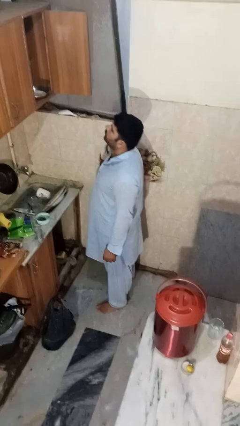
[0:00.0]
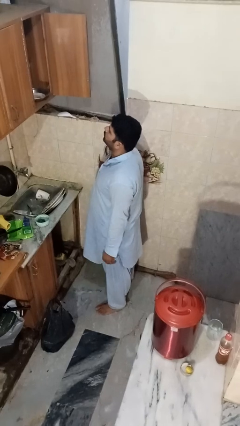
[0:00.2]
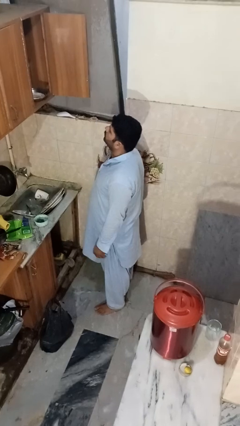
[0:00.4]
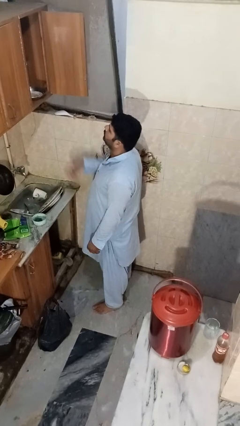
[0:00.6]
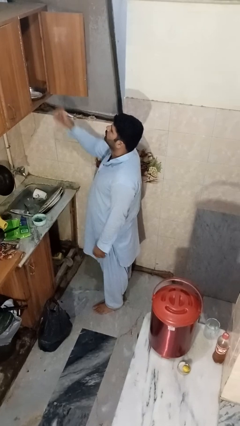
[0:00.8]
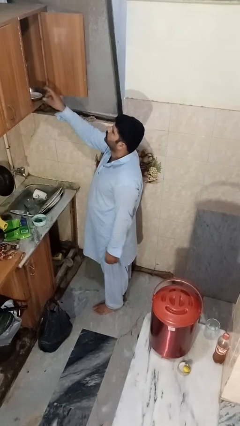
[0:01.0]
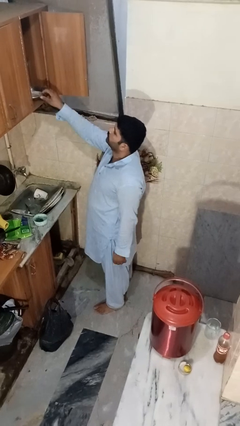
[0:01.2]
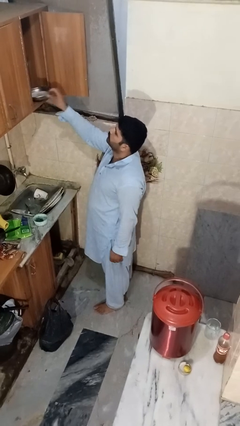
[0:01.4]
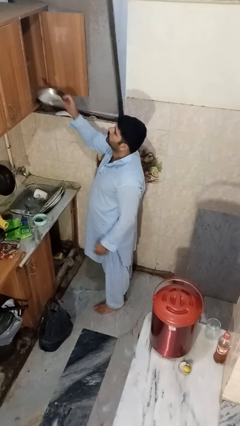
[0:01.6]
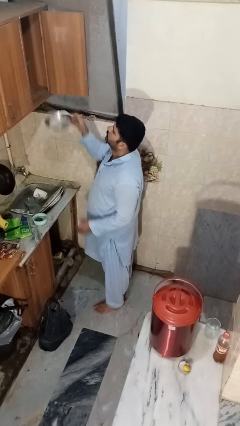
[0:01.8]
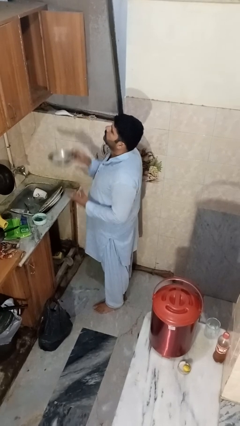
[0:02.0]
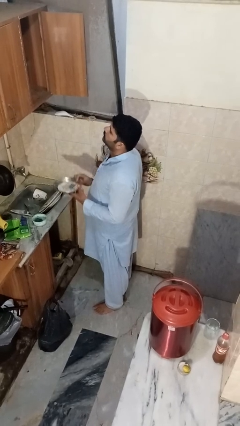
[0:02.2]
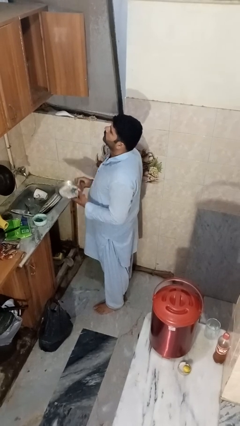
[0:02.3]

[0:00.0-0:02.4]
person takes object from cabinet

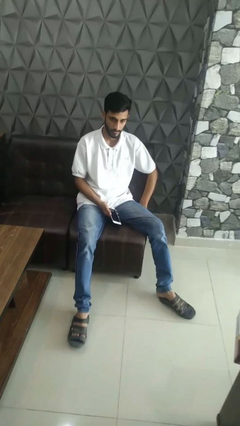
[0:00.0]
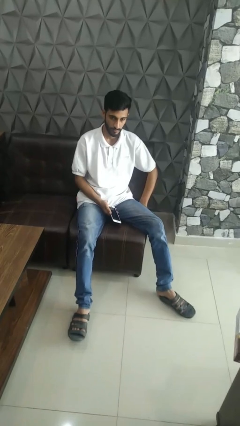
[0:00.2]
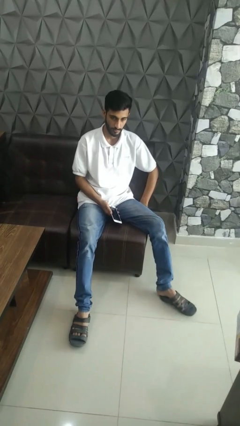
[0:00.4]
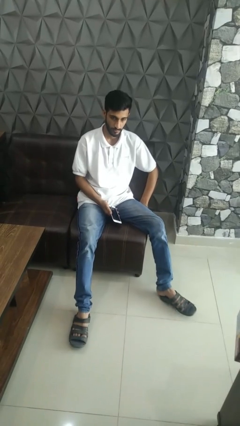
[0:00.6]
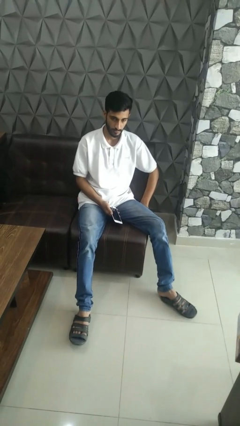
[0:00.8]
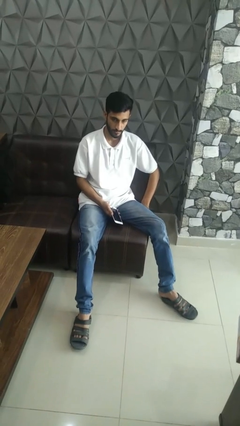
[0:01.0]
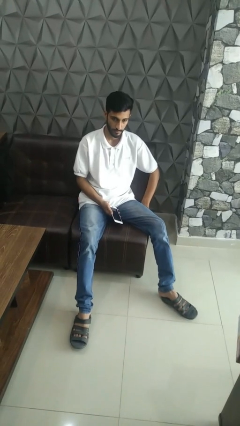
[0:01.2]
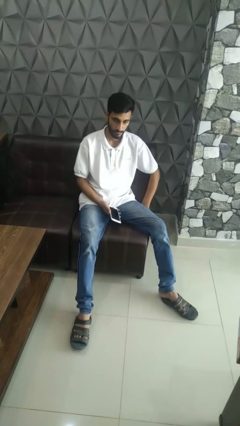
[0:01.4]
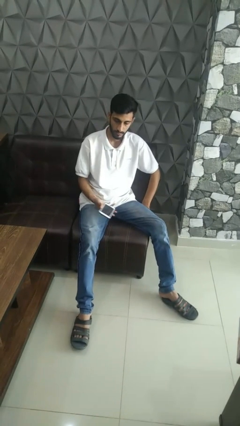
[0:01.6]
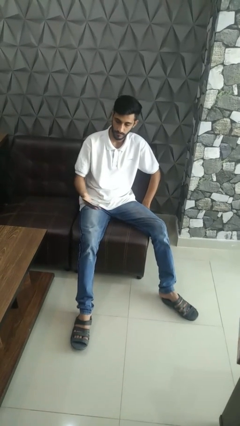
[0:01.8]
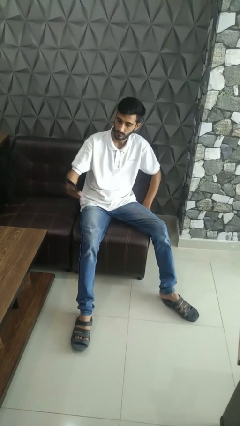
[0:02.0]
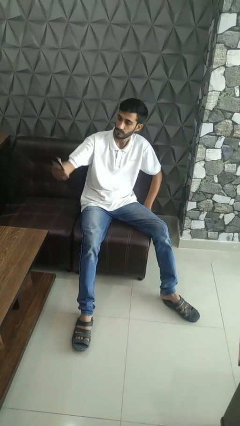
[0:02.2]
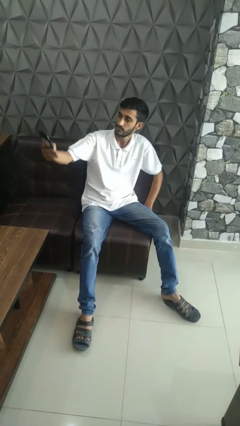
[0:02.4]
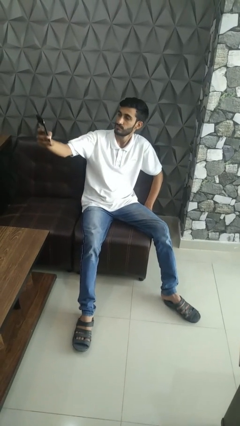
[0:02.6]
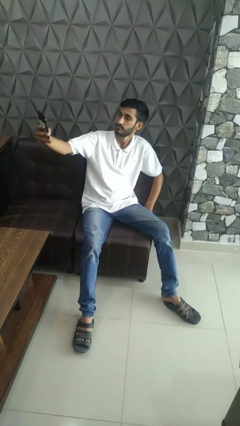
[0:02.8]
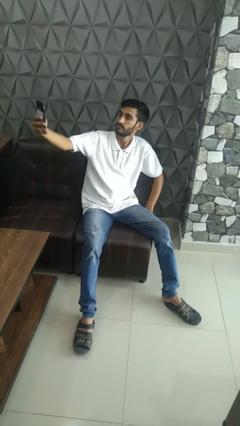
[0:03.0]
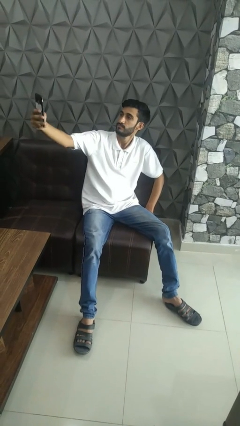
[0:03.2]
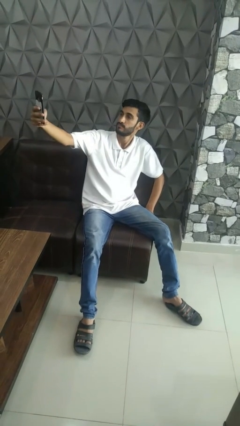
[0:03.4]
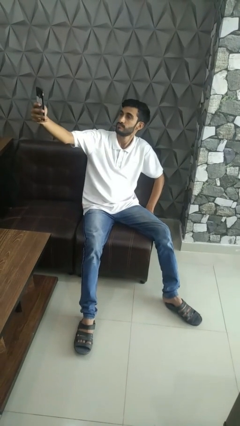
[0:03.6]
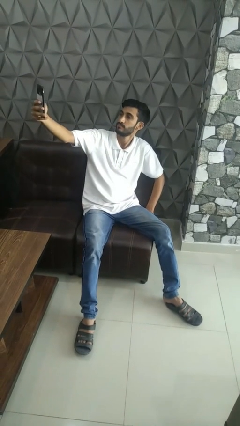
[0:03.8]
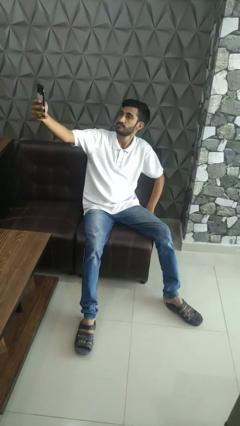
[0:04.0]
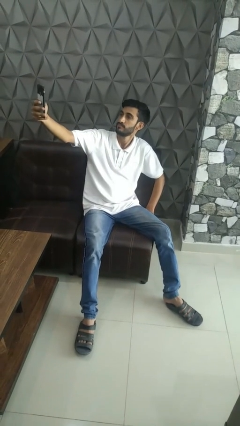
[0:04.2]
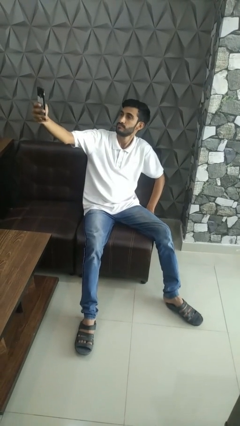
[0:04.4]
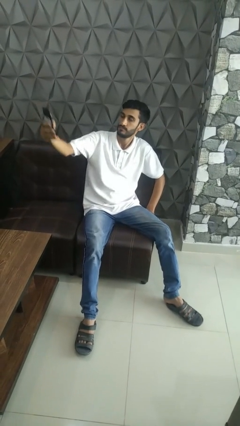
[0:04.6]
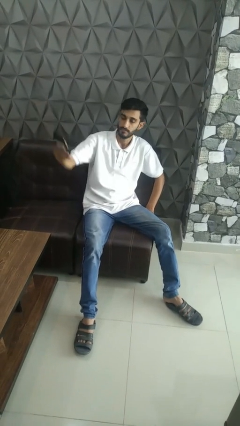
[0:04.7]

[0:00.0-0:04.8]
person takes selfie

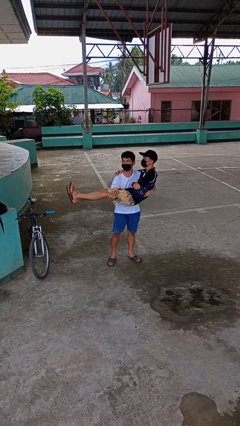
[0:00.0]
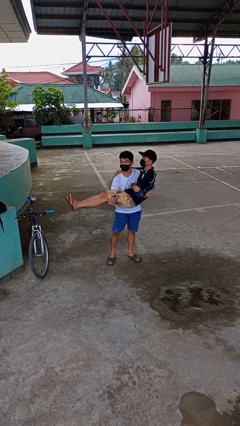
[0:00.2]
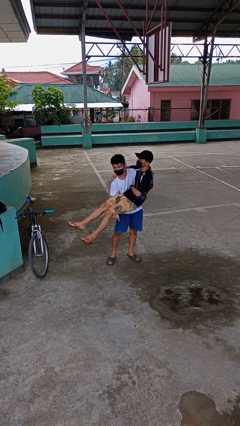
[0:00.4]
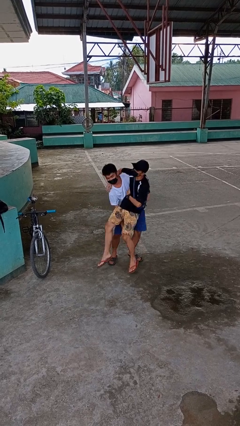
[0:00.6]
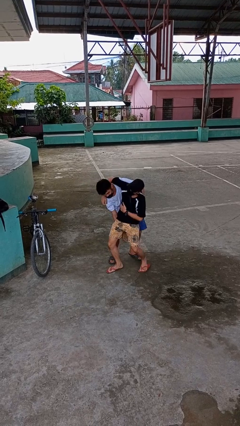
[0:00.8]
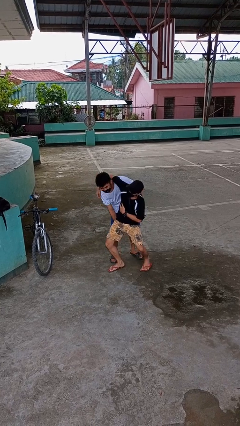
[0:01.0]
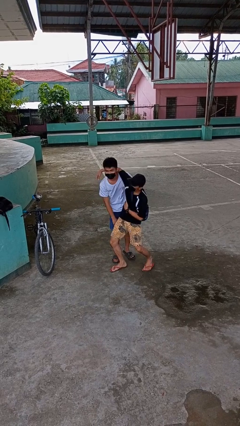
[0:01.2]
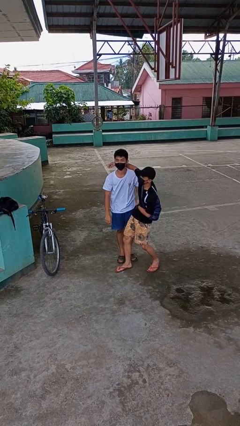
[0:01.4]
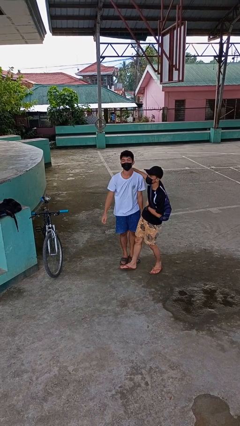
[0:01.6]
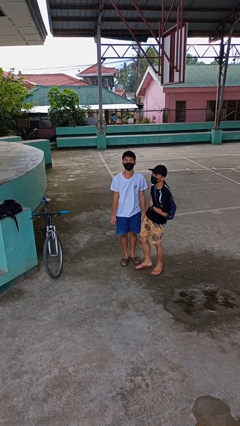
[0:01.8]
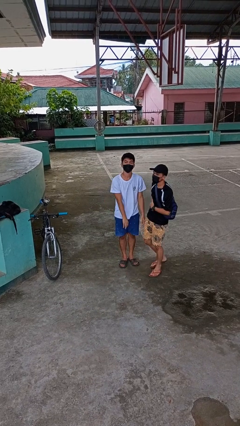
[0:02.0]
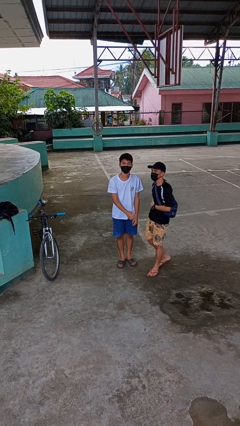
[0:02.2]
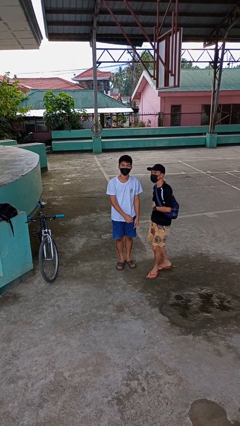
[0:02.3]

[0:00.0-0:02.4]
person puts down person

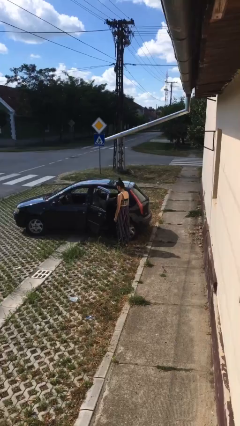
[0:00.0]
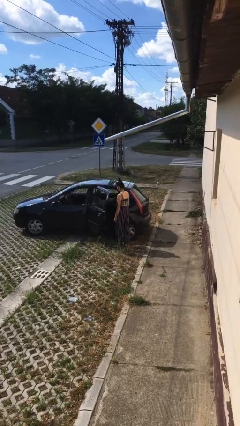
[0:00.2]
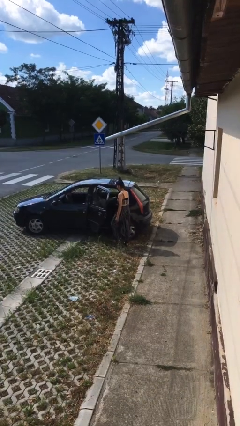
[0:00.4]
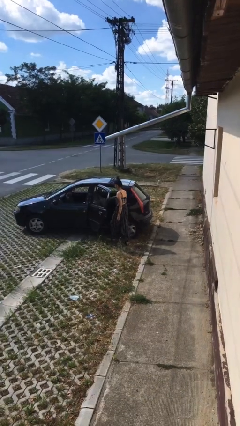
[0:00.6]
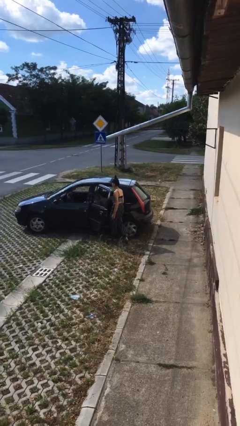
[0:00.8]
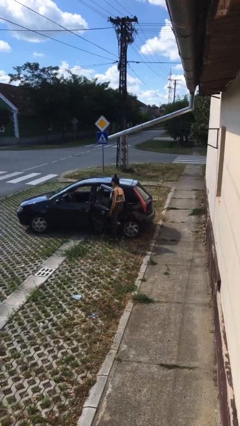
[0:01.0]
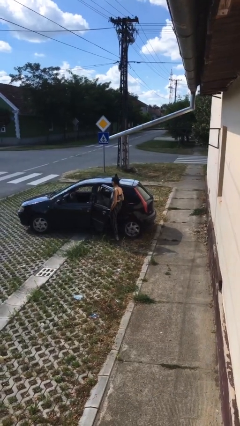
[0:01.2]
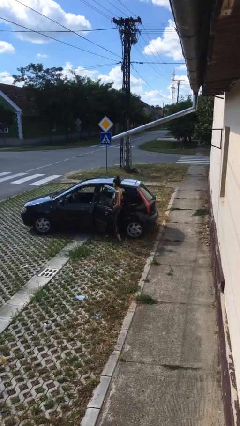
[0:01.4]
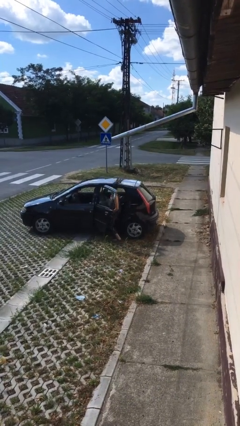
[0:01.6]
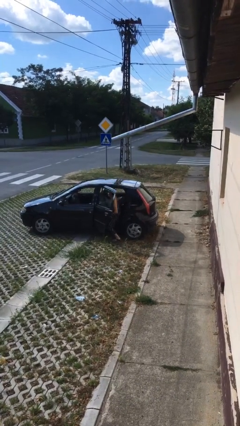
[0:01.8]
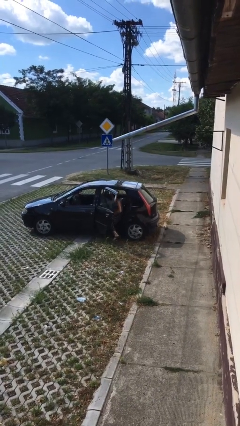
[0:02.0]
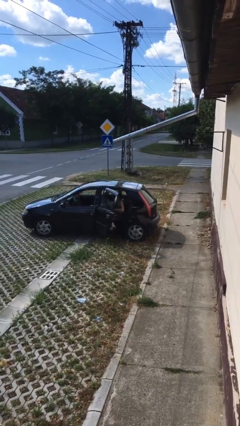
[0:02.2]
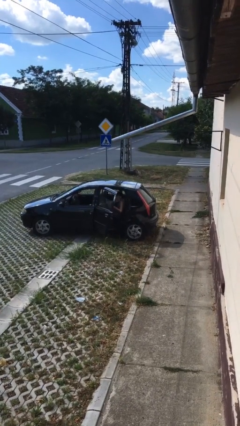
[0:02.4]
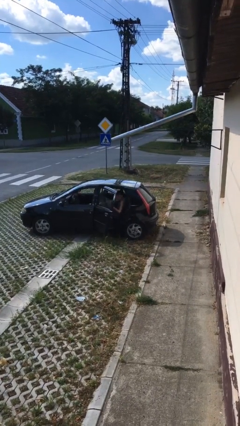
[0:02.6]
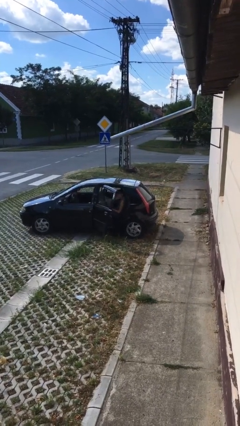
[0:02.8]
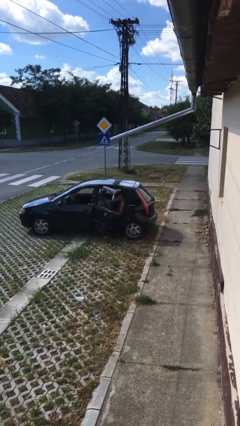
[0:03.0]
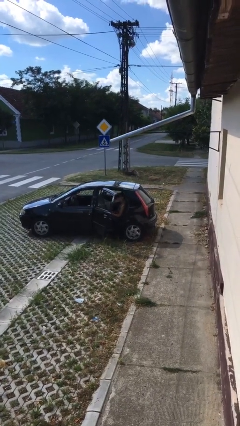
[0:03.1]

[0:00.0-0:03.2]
person enters car

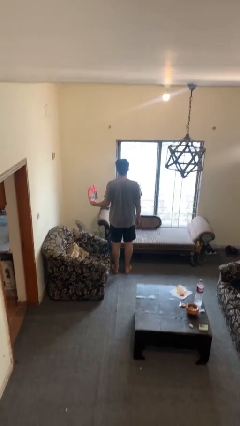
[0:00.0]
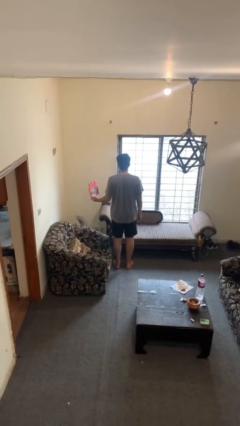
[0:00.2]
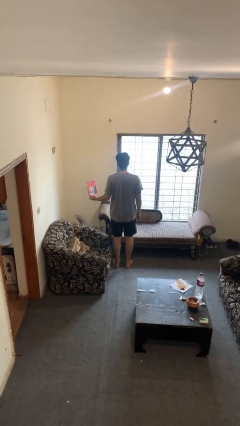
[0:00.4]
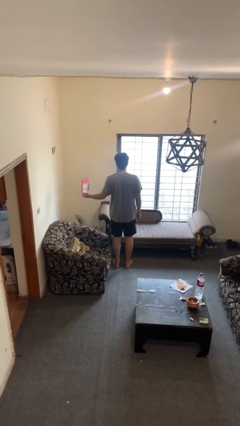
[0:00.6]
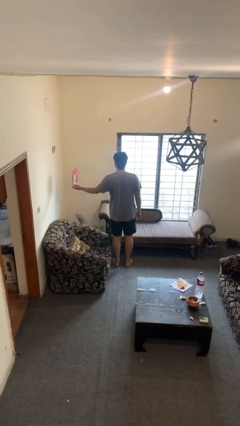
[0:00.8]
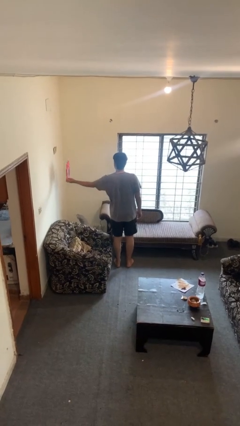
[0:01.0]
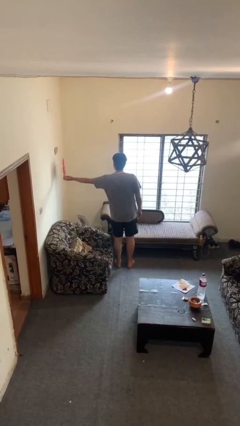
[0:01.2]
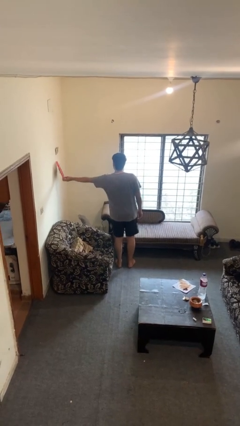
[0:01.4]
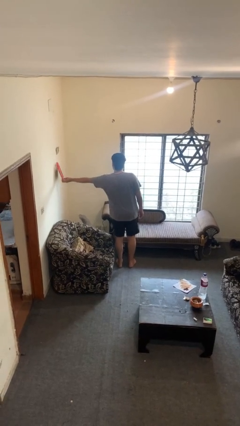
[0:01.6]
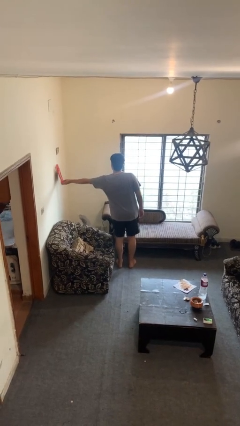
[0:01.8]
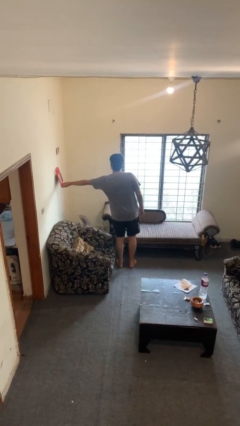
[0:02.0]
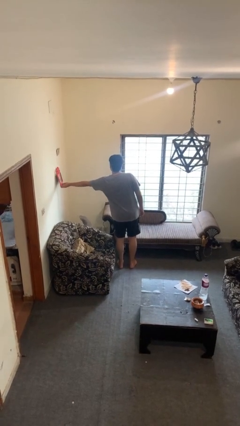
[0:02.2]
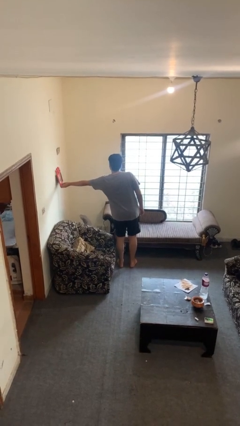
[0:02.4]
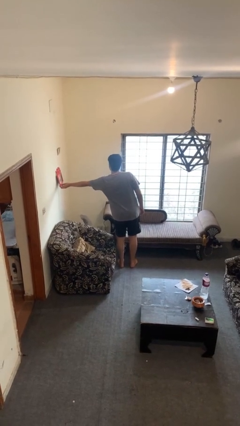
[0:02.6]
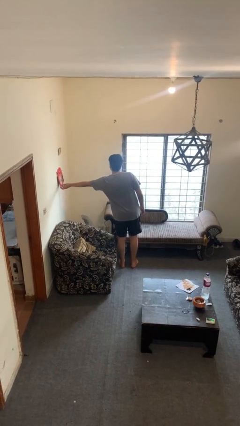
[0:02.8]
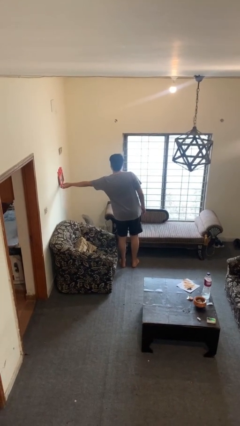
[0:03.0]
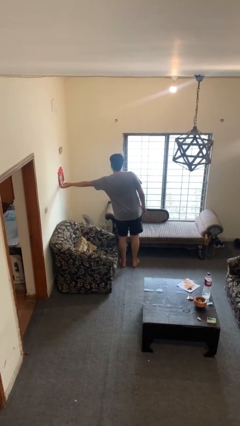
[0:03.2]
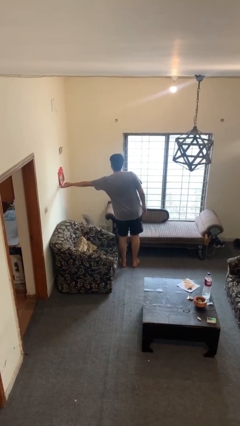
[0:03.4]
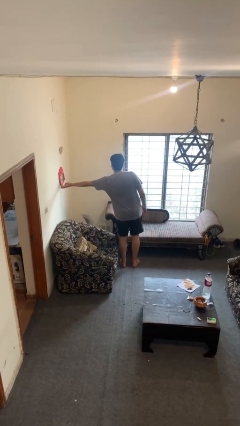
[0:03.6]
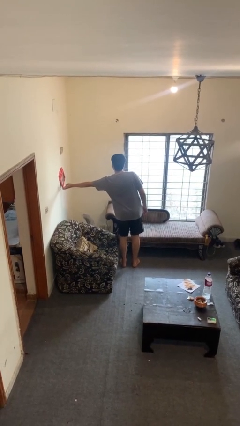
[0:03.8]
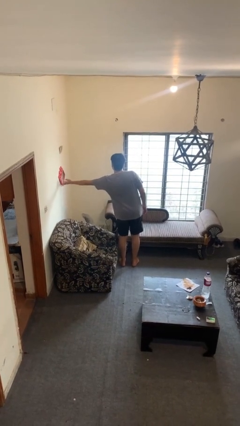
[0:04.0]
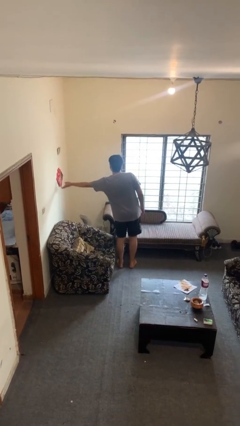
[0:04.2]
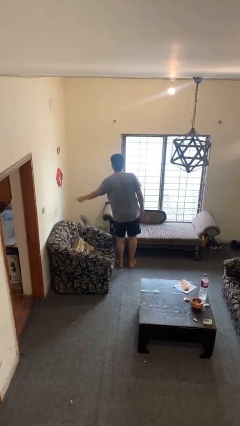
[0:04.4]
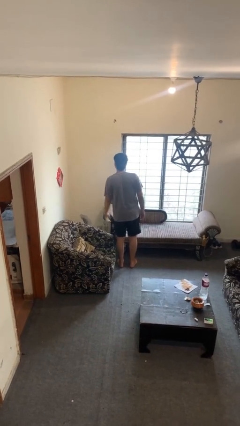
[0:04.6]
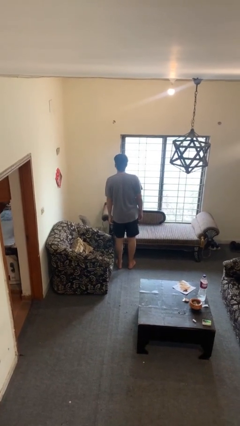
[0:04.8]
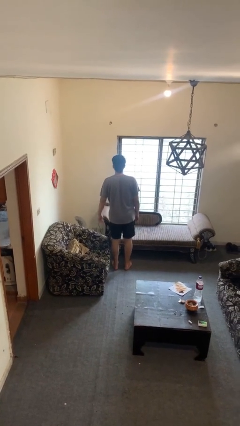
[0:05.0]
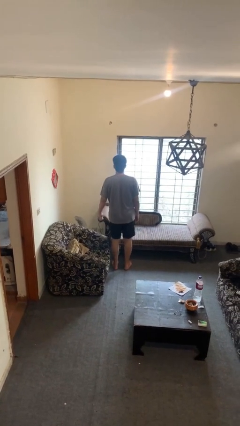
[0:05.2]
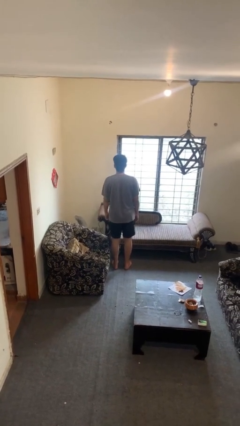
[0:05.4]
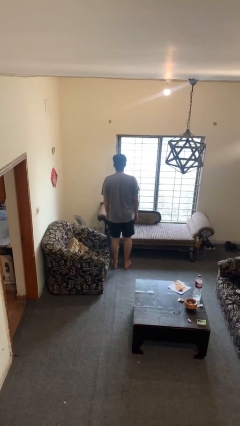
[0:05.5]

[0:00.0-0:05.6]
person puts up picture frame
